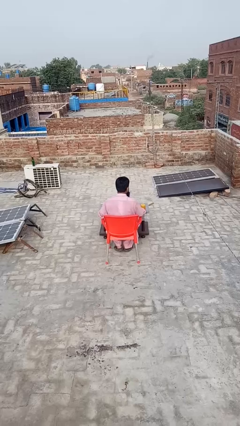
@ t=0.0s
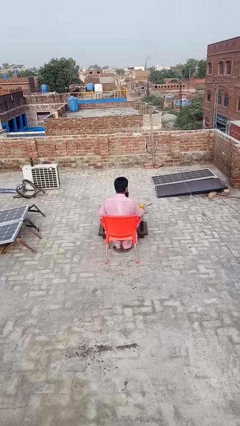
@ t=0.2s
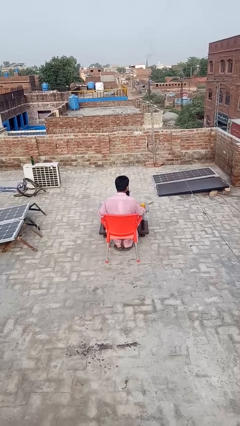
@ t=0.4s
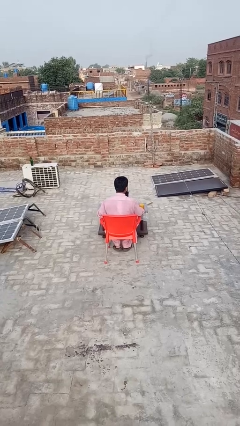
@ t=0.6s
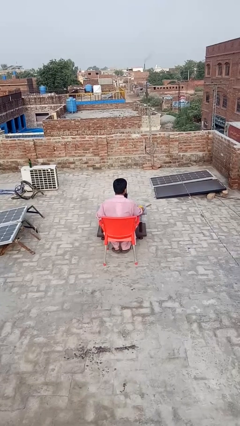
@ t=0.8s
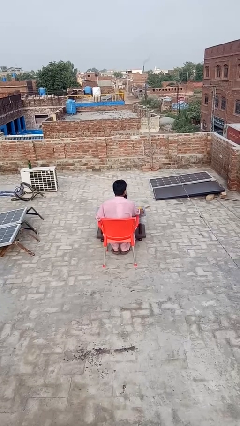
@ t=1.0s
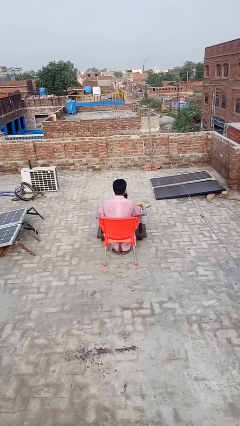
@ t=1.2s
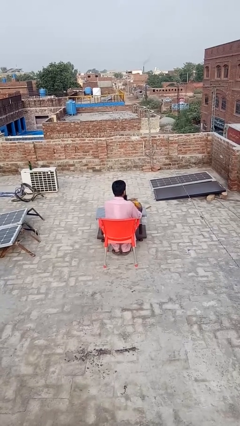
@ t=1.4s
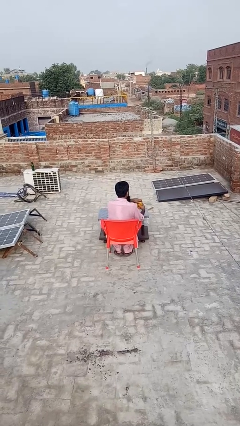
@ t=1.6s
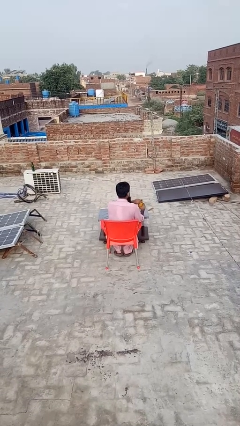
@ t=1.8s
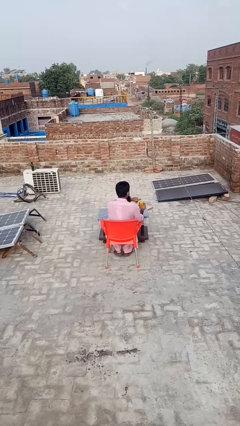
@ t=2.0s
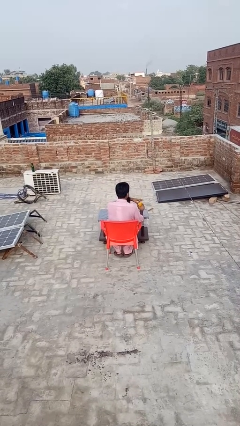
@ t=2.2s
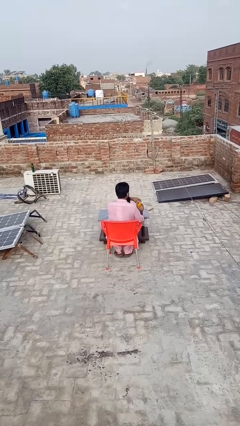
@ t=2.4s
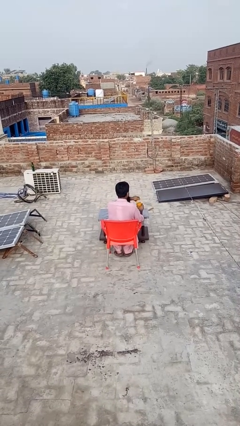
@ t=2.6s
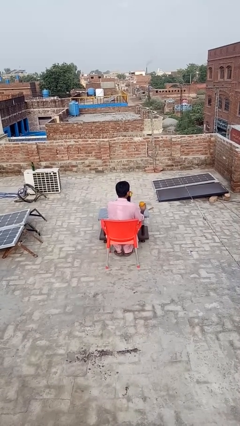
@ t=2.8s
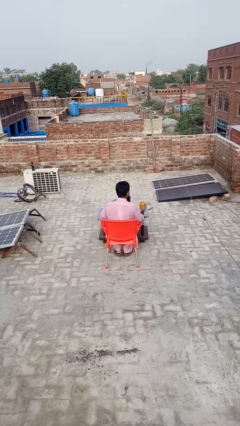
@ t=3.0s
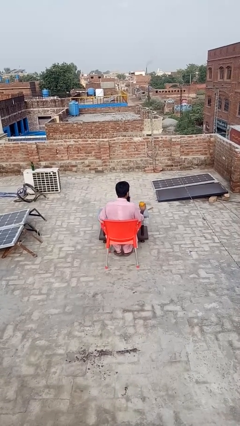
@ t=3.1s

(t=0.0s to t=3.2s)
person opens jar

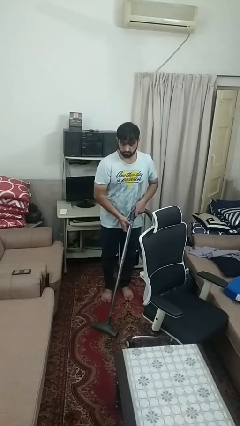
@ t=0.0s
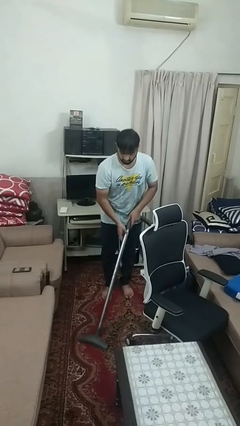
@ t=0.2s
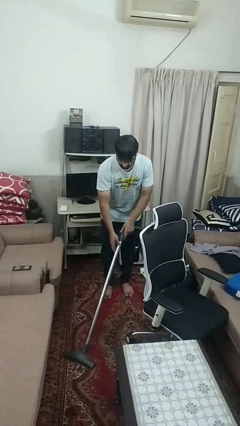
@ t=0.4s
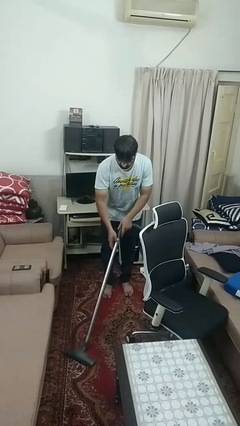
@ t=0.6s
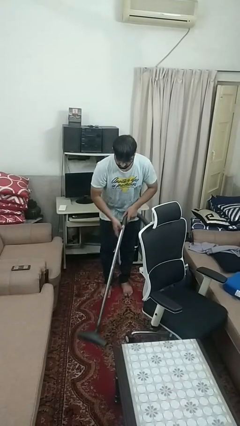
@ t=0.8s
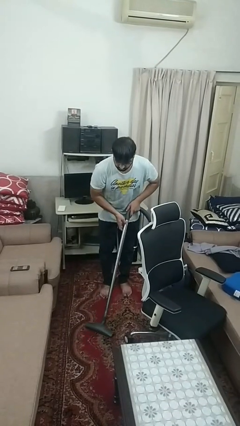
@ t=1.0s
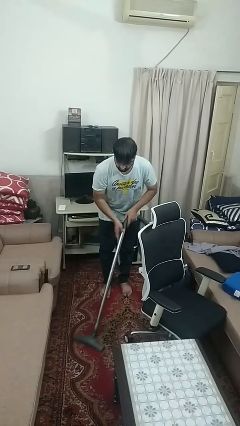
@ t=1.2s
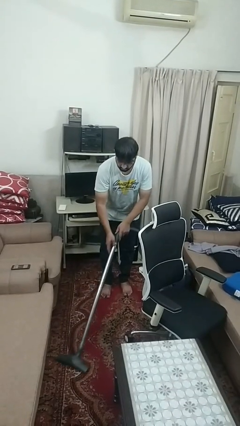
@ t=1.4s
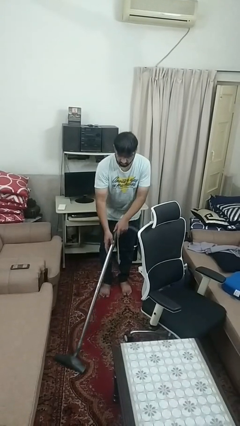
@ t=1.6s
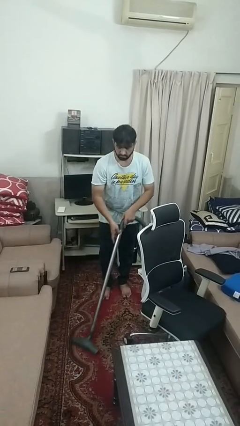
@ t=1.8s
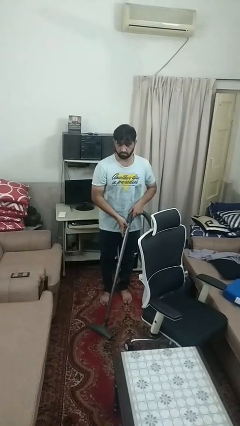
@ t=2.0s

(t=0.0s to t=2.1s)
person vacuums carpet

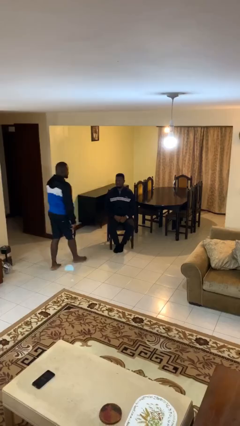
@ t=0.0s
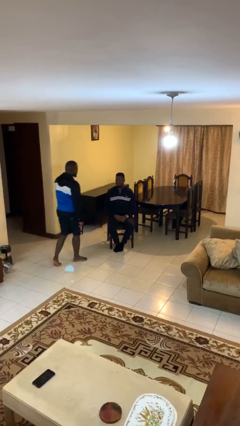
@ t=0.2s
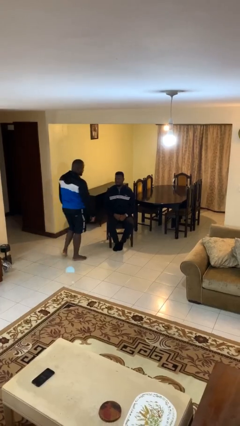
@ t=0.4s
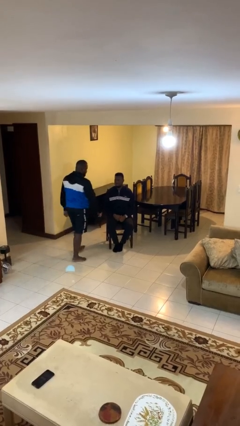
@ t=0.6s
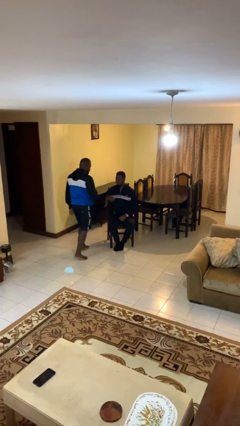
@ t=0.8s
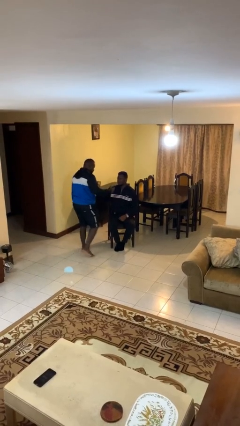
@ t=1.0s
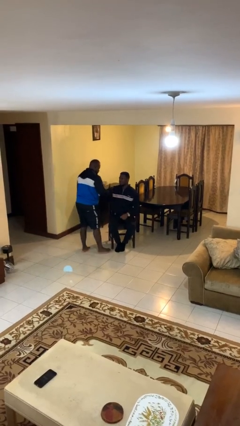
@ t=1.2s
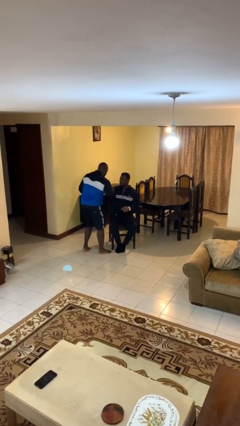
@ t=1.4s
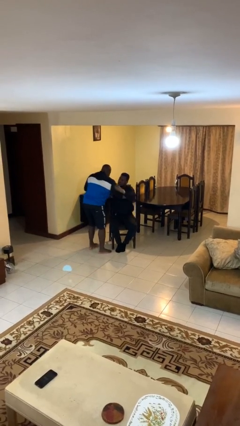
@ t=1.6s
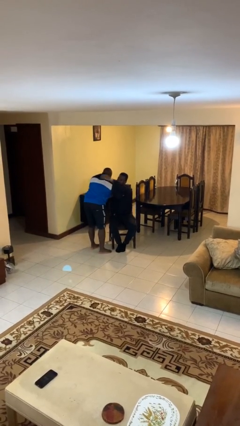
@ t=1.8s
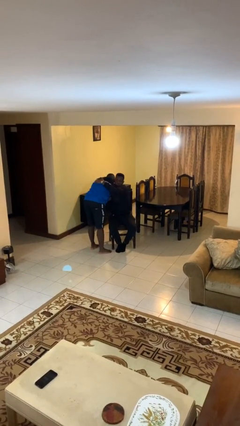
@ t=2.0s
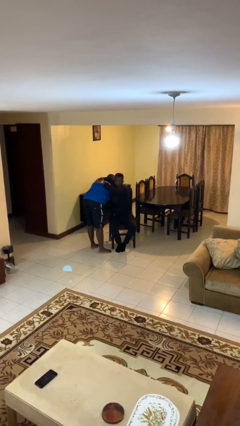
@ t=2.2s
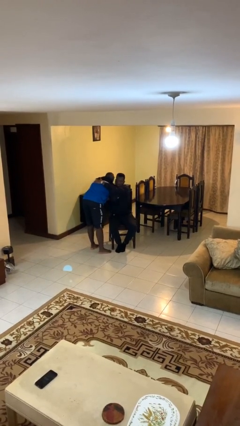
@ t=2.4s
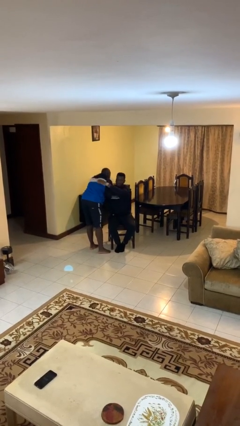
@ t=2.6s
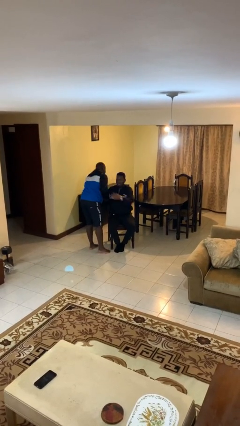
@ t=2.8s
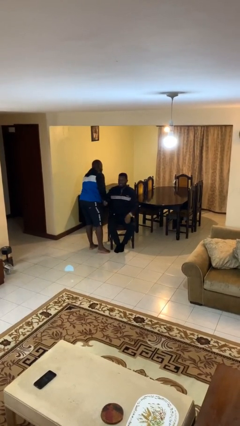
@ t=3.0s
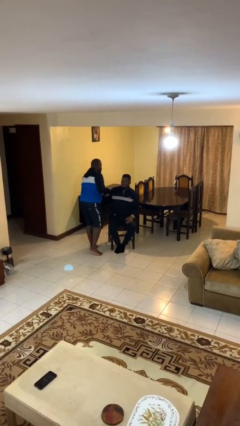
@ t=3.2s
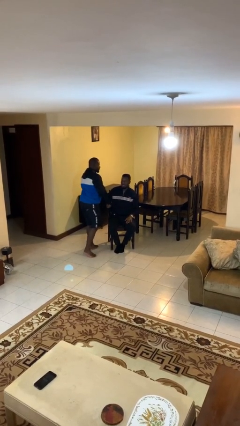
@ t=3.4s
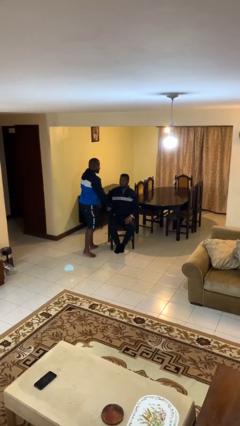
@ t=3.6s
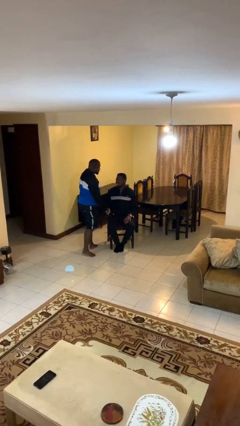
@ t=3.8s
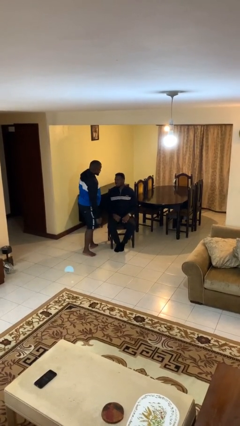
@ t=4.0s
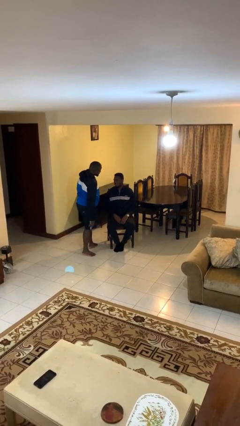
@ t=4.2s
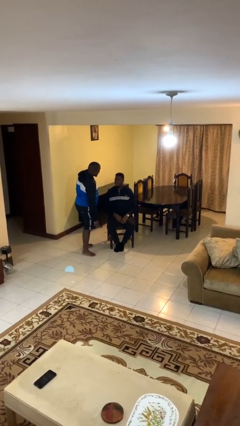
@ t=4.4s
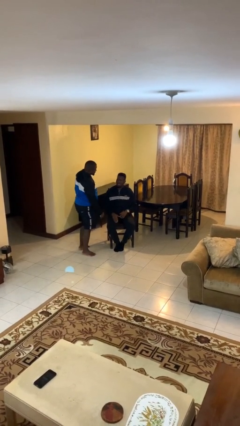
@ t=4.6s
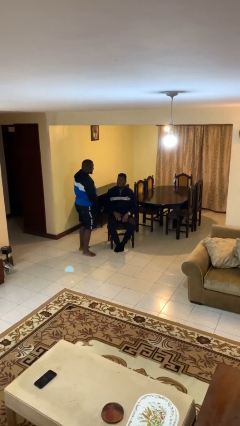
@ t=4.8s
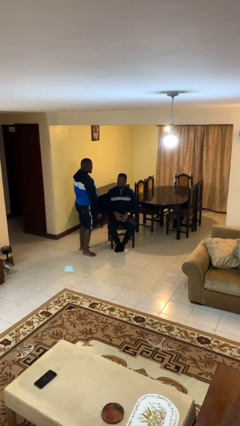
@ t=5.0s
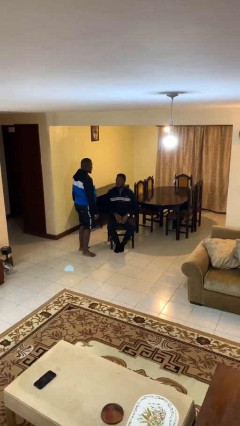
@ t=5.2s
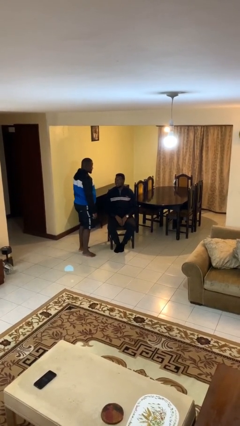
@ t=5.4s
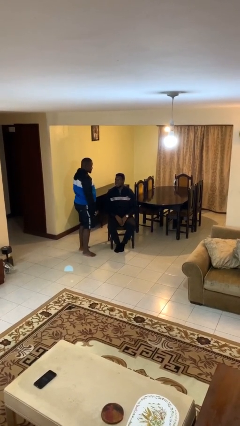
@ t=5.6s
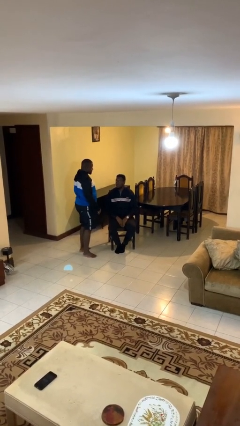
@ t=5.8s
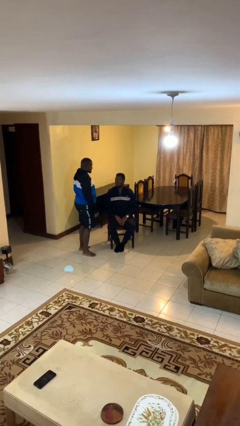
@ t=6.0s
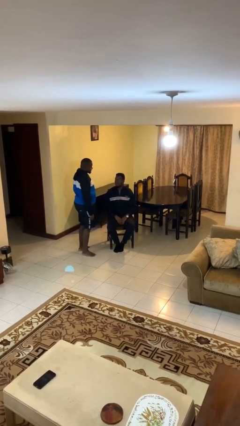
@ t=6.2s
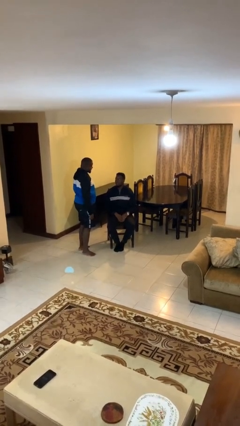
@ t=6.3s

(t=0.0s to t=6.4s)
person embraces person

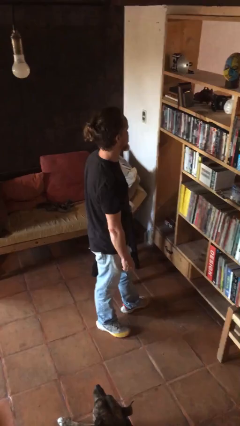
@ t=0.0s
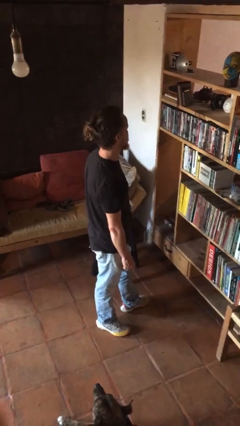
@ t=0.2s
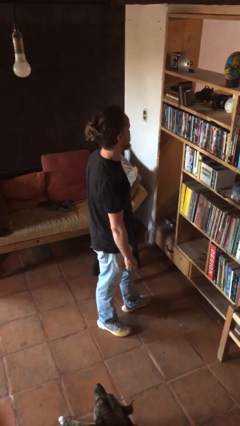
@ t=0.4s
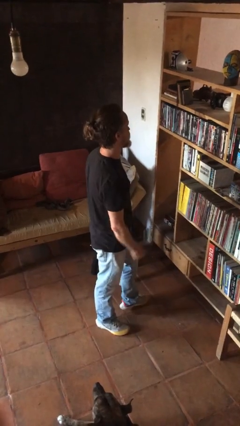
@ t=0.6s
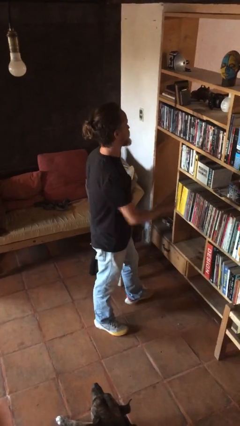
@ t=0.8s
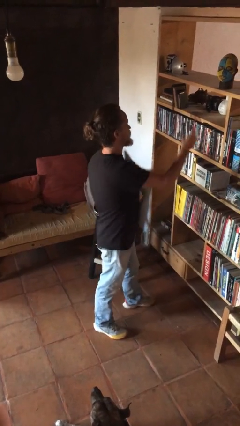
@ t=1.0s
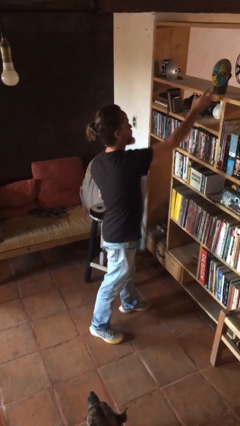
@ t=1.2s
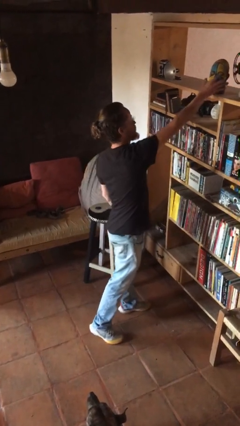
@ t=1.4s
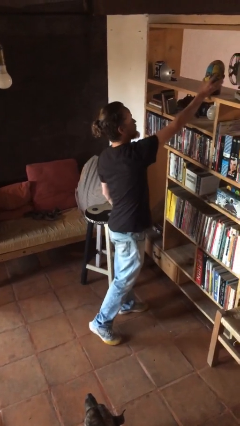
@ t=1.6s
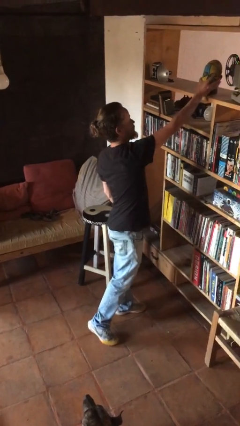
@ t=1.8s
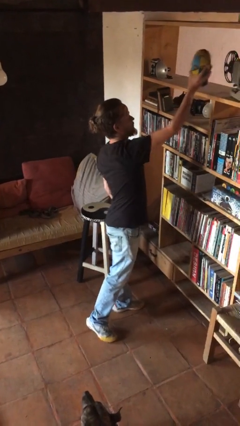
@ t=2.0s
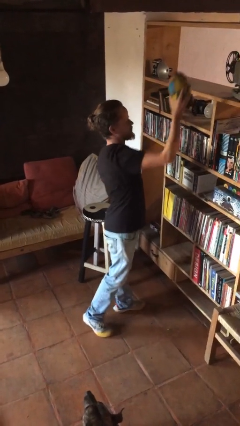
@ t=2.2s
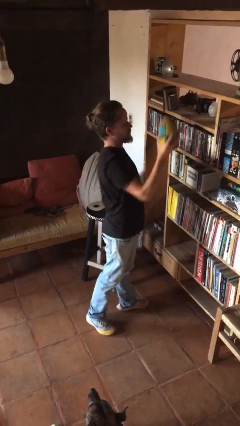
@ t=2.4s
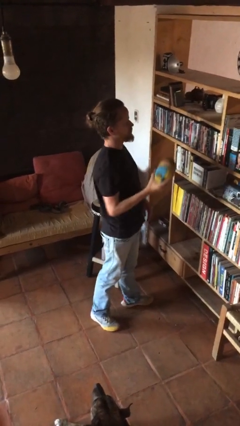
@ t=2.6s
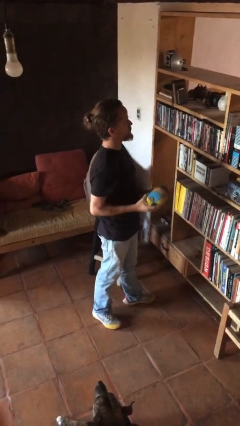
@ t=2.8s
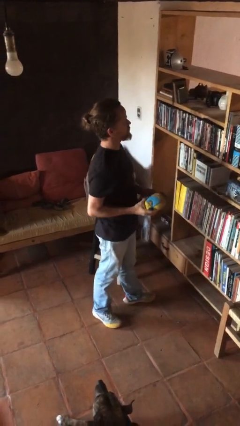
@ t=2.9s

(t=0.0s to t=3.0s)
person picks up object from countertop

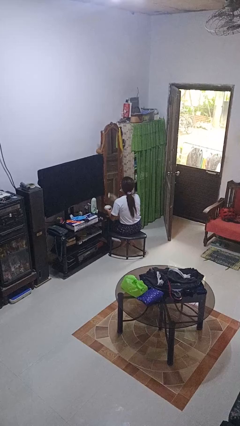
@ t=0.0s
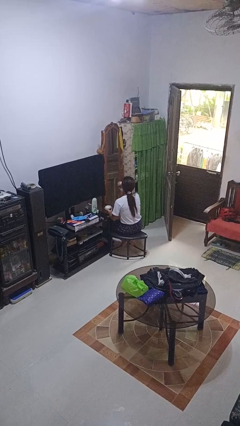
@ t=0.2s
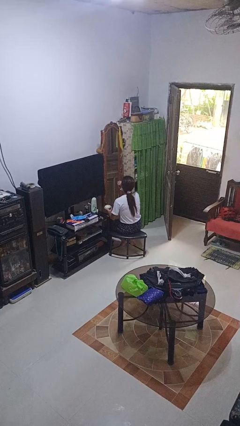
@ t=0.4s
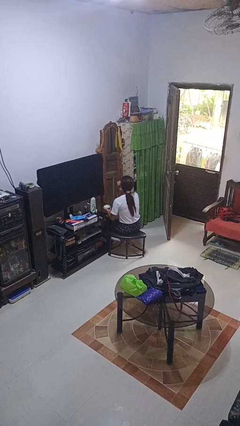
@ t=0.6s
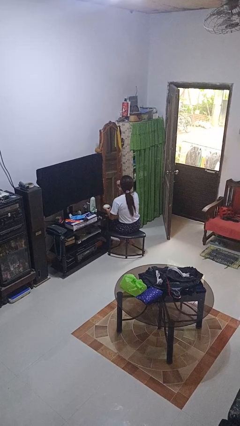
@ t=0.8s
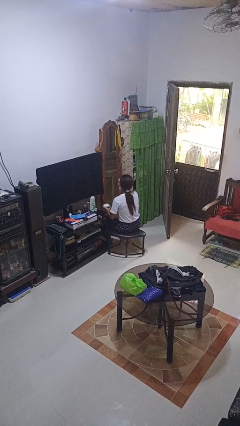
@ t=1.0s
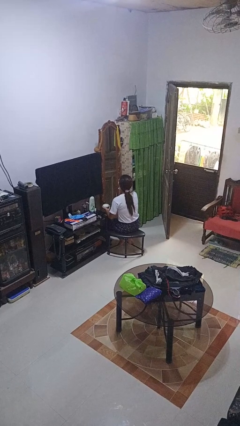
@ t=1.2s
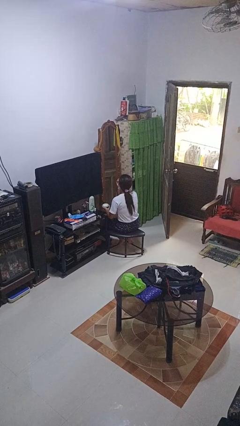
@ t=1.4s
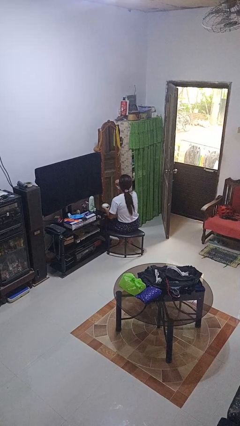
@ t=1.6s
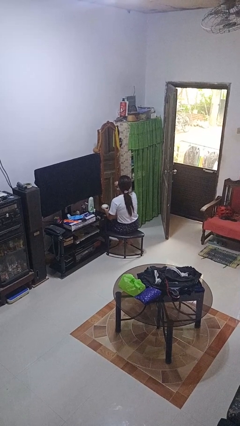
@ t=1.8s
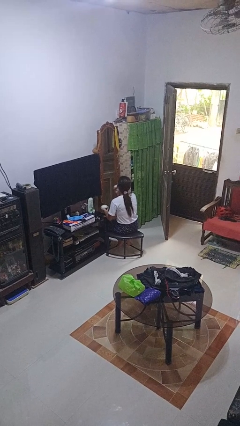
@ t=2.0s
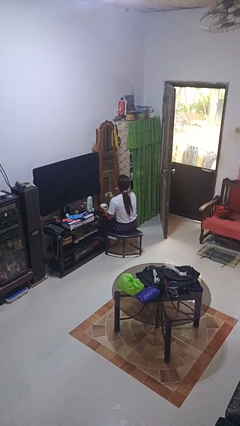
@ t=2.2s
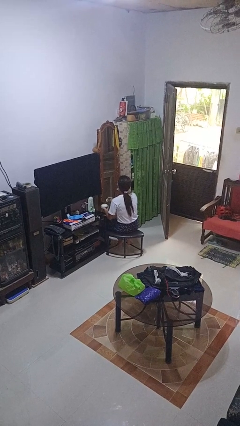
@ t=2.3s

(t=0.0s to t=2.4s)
person applies foundation makeup

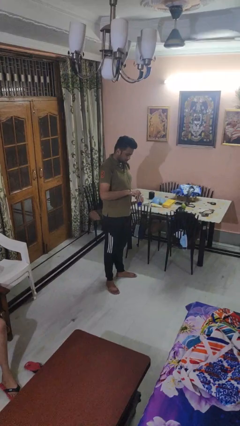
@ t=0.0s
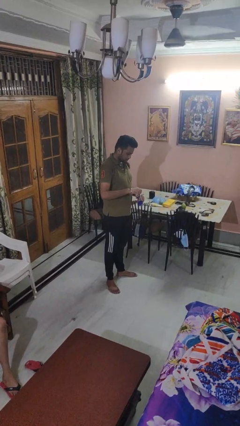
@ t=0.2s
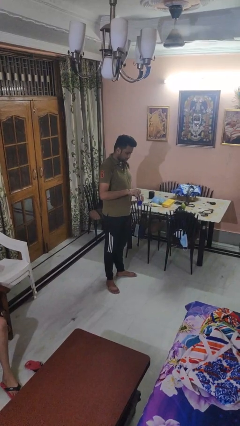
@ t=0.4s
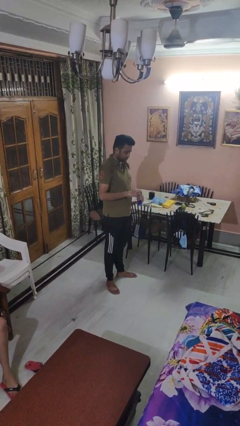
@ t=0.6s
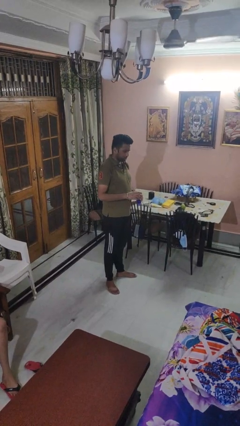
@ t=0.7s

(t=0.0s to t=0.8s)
person opens beverage can
